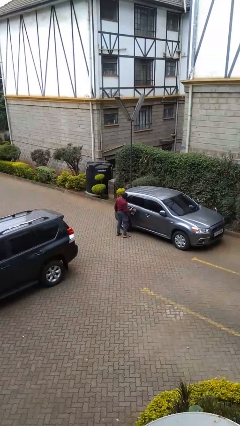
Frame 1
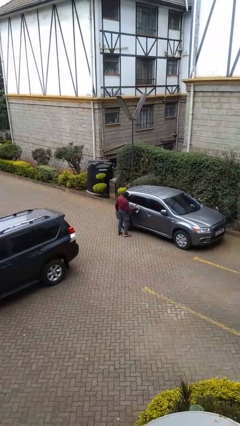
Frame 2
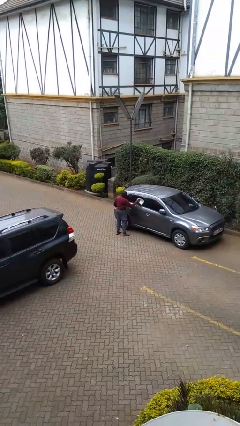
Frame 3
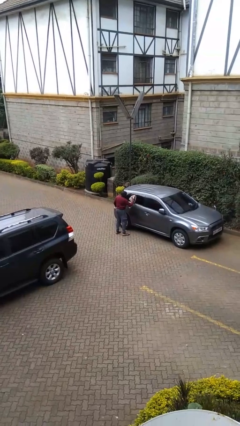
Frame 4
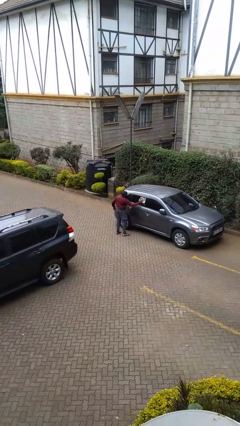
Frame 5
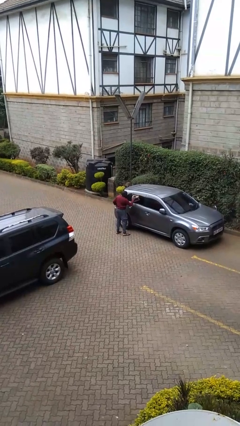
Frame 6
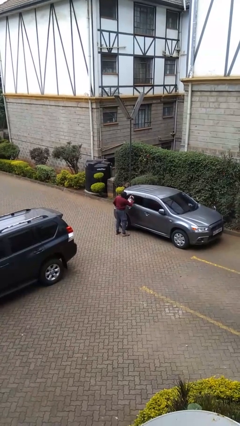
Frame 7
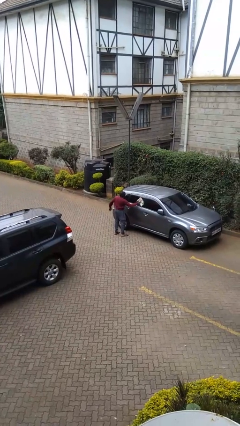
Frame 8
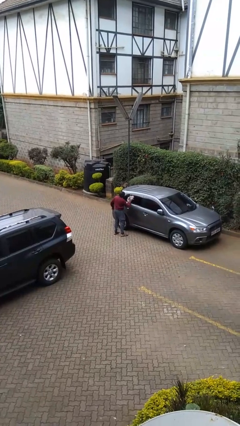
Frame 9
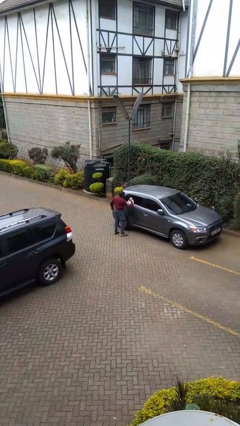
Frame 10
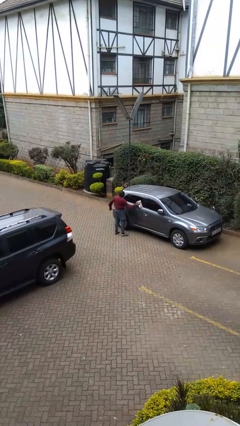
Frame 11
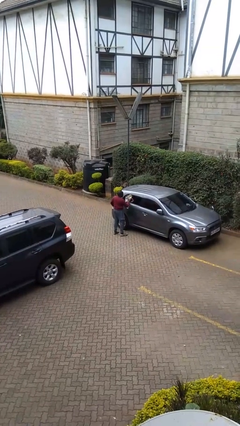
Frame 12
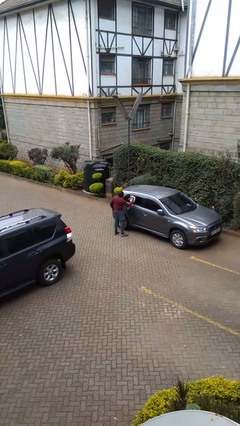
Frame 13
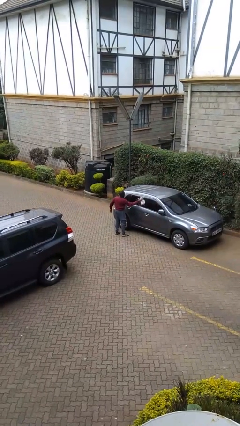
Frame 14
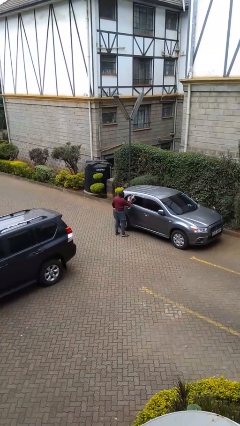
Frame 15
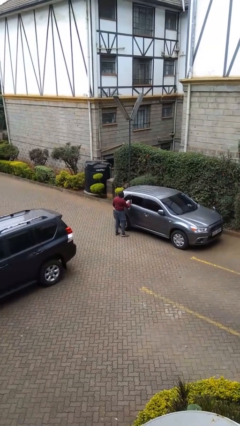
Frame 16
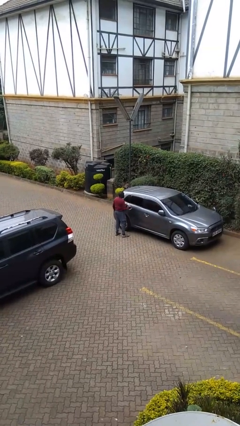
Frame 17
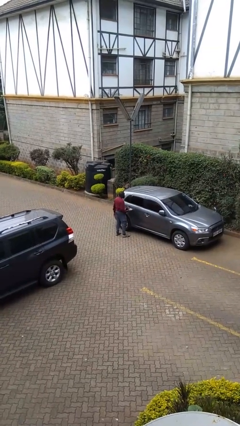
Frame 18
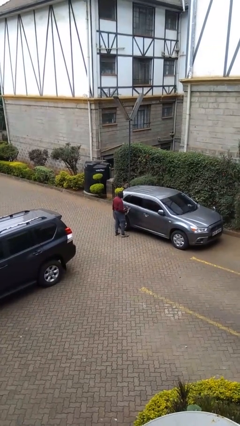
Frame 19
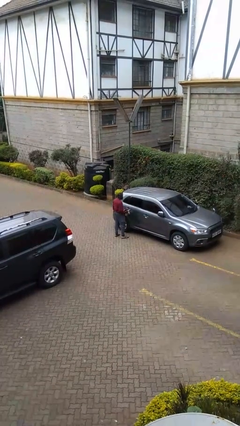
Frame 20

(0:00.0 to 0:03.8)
person polishes car with rag

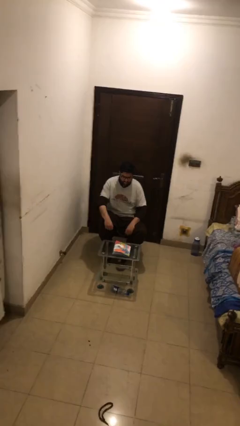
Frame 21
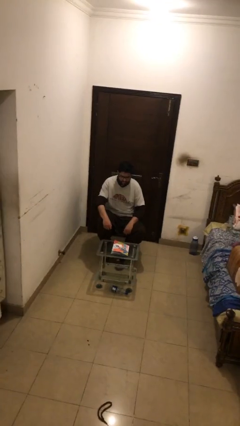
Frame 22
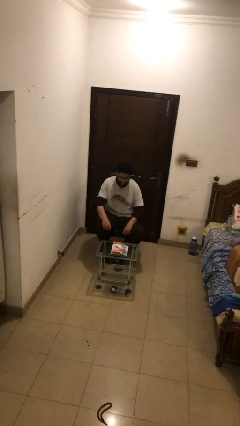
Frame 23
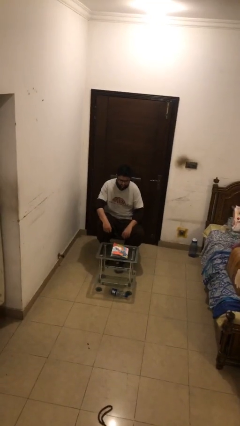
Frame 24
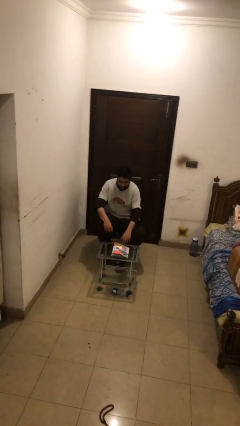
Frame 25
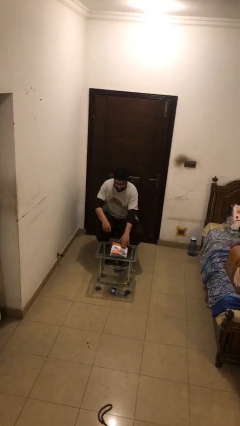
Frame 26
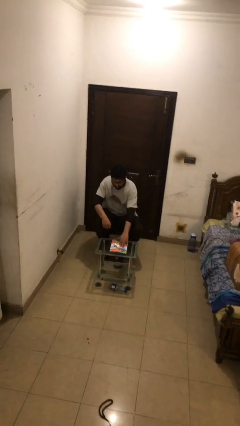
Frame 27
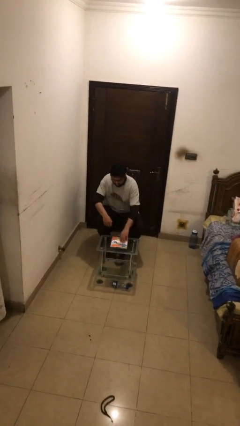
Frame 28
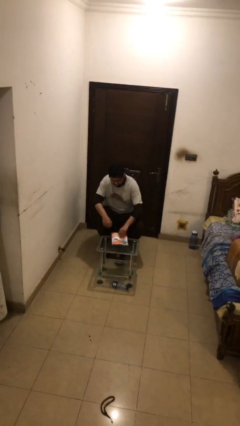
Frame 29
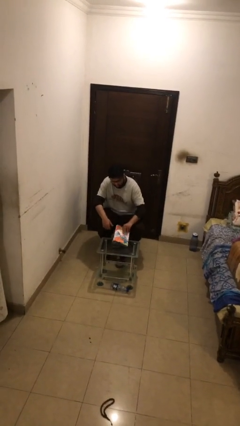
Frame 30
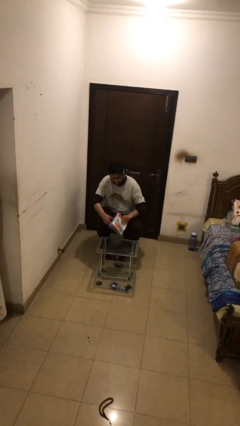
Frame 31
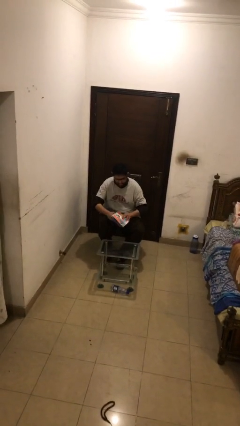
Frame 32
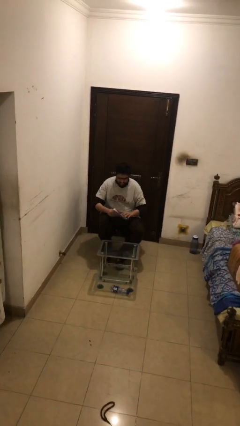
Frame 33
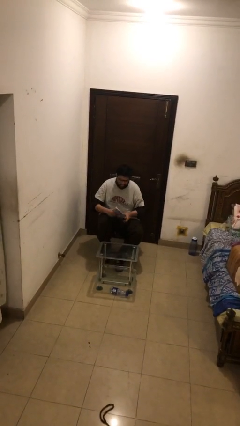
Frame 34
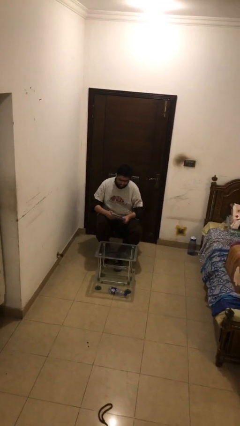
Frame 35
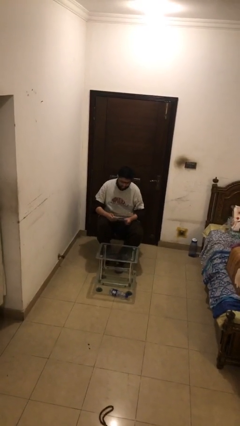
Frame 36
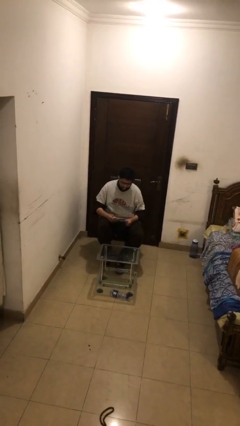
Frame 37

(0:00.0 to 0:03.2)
person picks up object from table

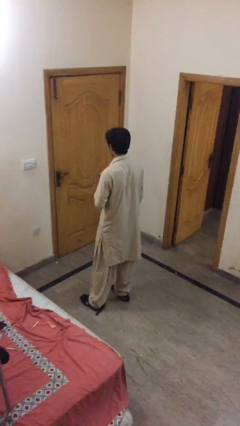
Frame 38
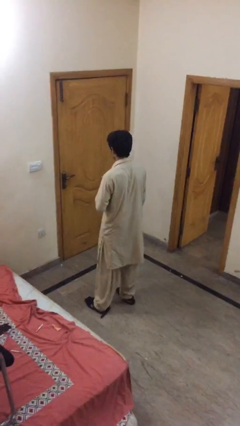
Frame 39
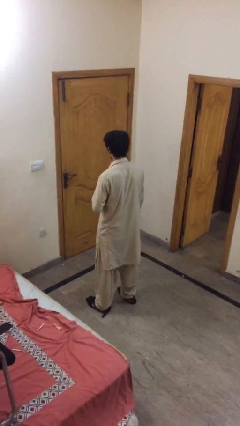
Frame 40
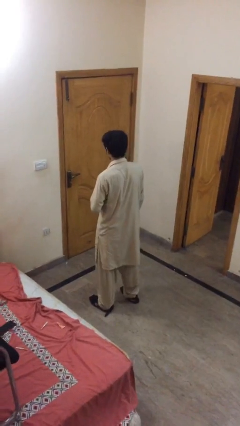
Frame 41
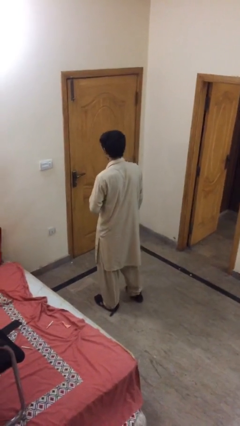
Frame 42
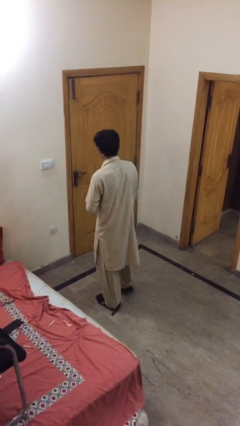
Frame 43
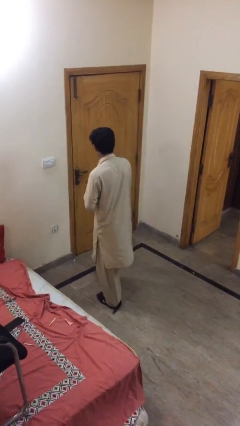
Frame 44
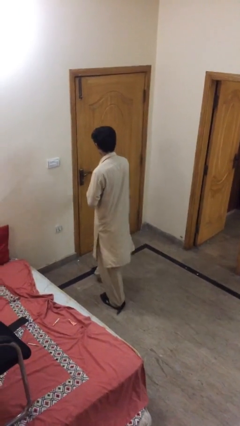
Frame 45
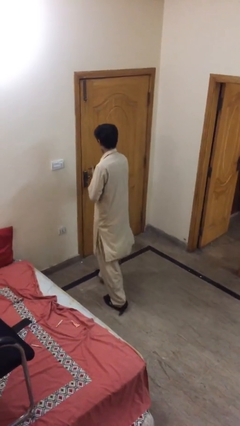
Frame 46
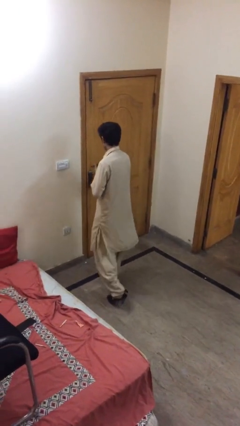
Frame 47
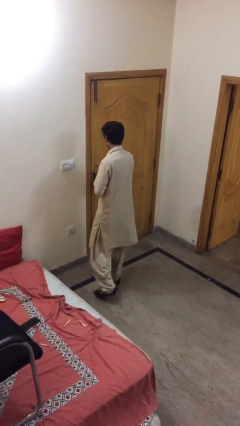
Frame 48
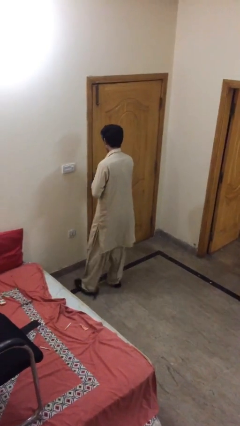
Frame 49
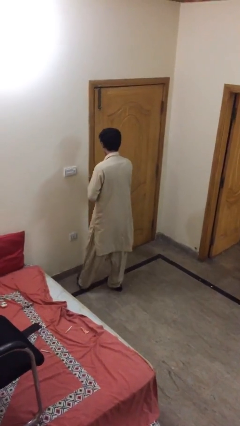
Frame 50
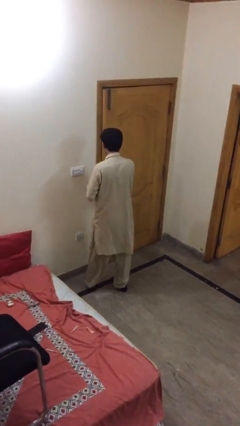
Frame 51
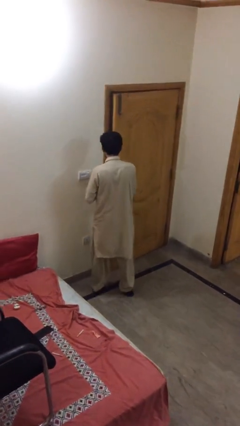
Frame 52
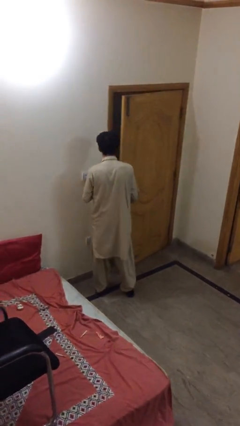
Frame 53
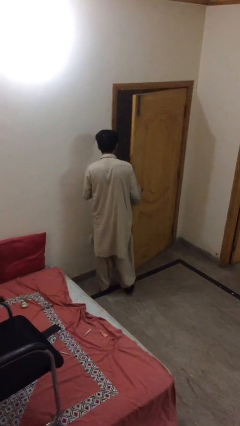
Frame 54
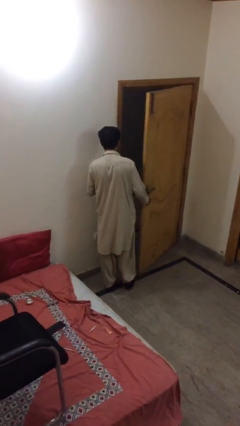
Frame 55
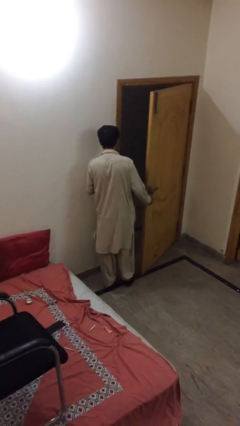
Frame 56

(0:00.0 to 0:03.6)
person opens facility door

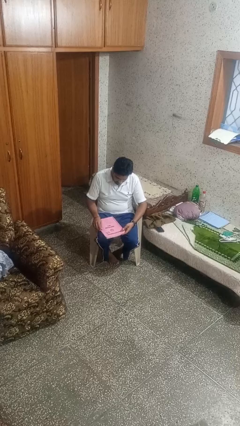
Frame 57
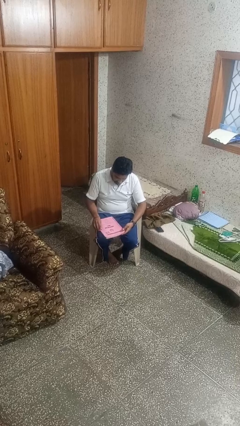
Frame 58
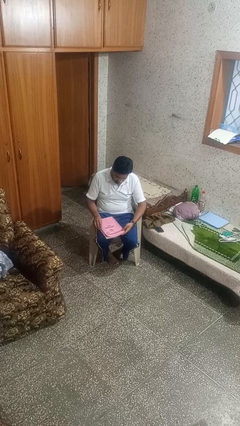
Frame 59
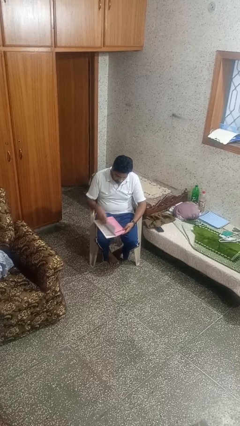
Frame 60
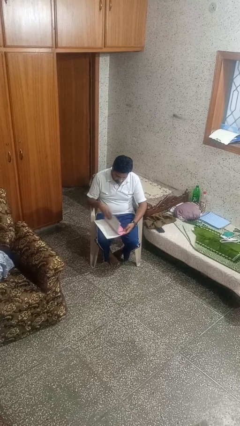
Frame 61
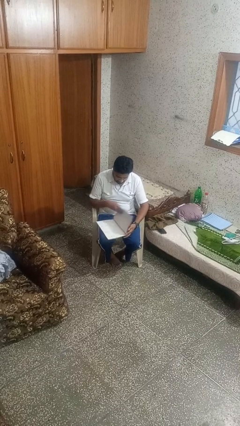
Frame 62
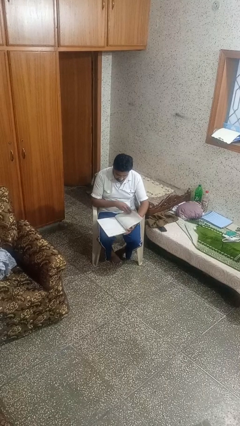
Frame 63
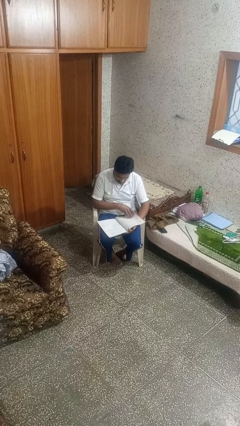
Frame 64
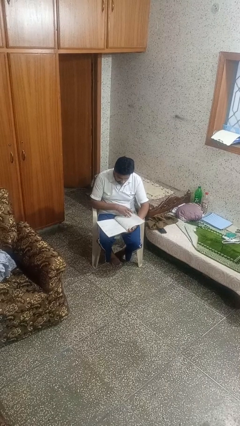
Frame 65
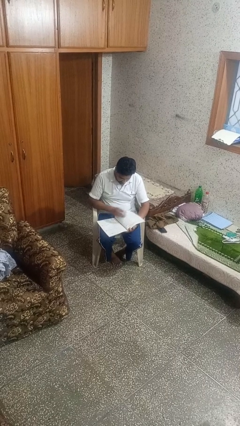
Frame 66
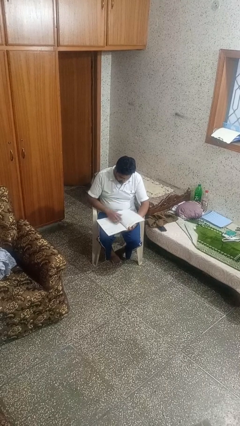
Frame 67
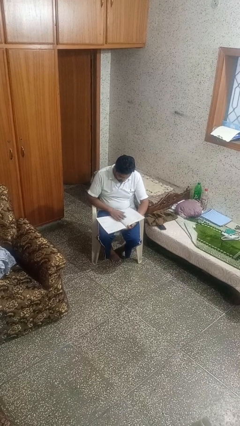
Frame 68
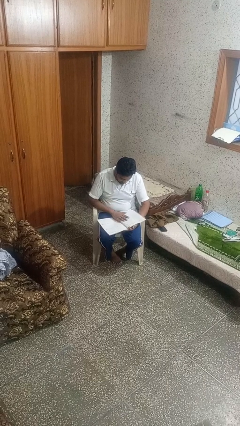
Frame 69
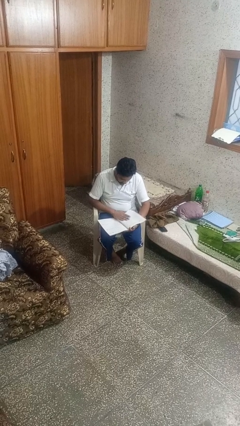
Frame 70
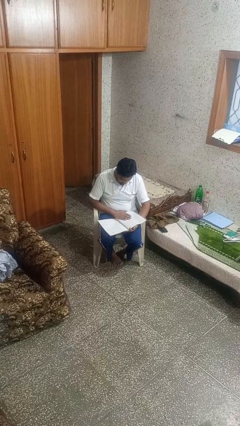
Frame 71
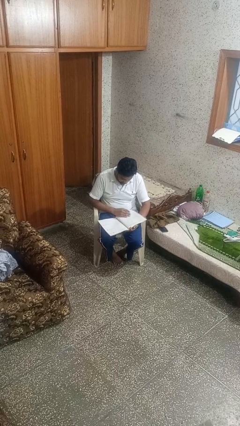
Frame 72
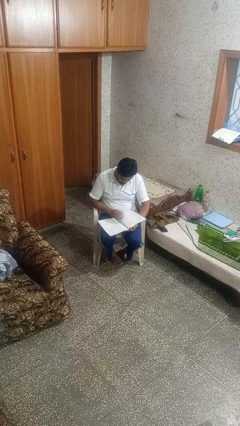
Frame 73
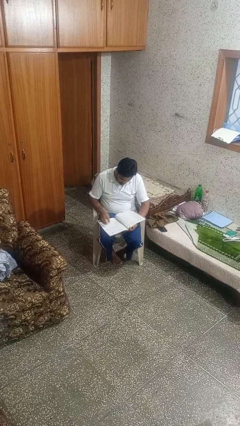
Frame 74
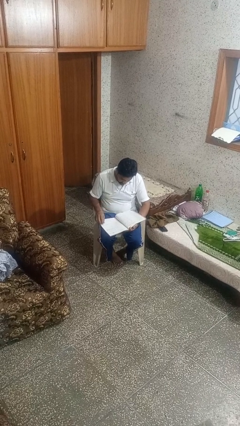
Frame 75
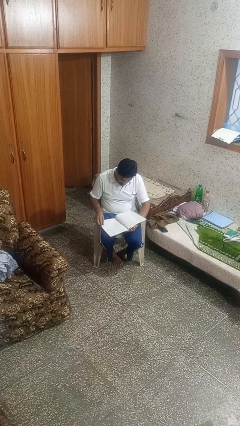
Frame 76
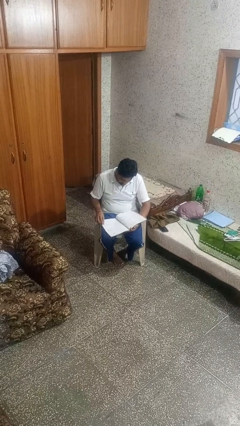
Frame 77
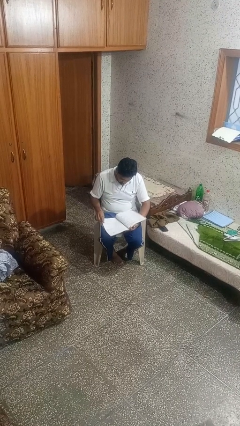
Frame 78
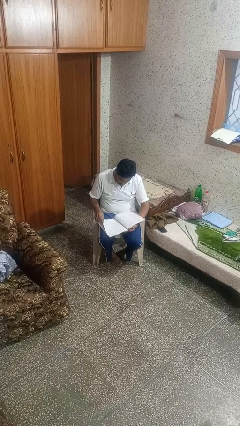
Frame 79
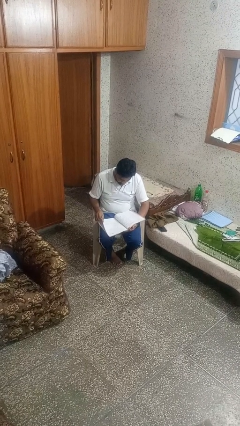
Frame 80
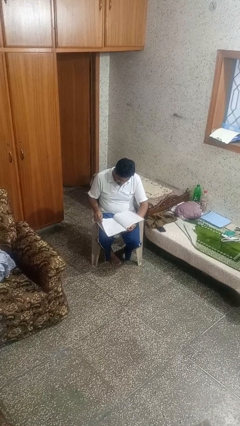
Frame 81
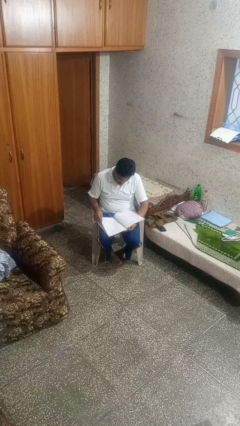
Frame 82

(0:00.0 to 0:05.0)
person reads book

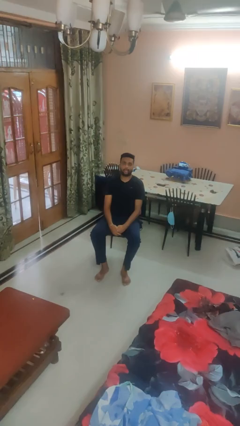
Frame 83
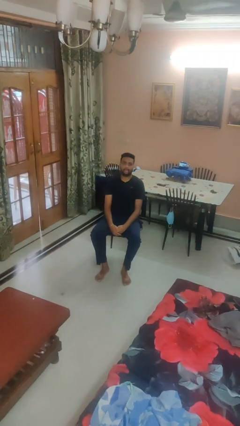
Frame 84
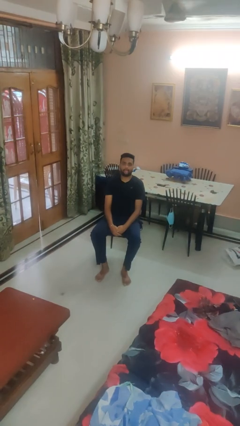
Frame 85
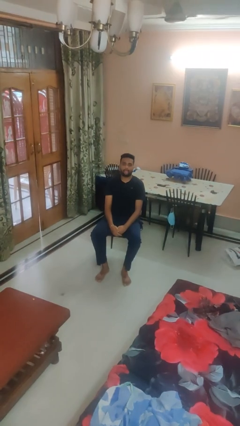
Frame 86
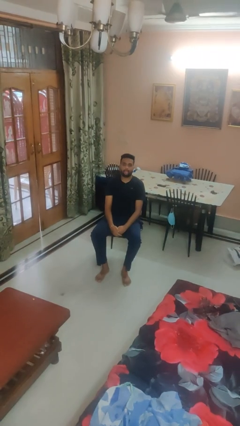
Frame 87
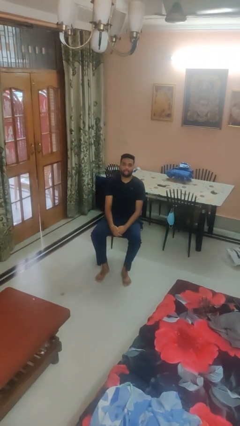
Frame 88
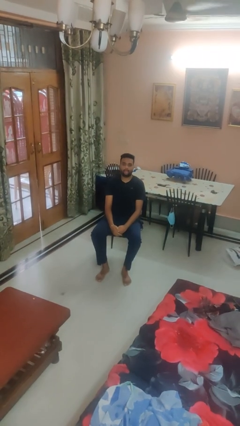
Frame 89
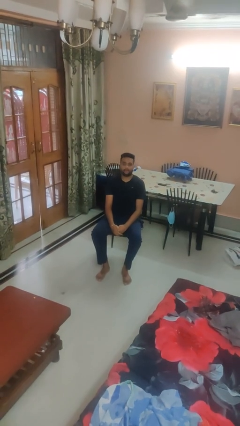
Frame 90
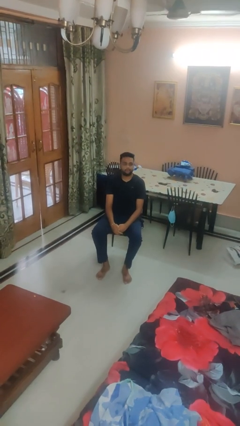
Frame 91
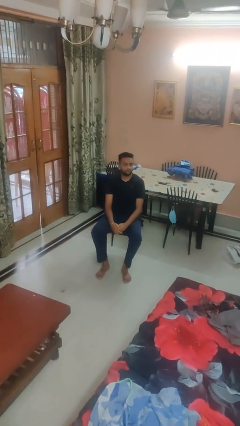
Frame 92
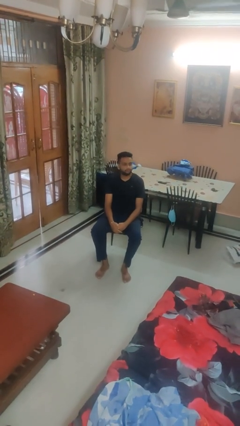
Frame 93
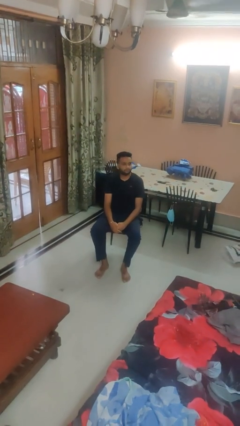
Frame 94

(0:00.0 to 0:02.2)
person sticks out tongue
